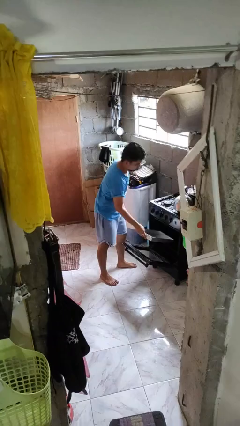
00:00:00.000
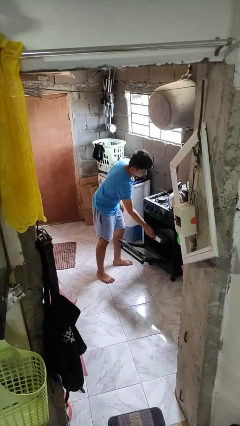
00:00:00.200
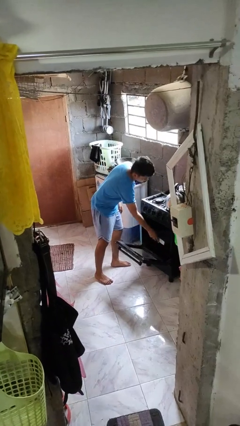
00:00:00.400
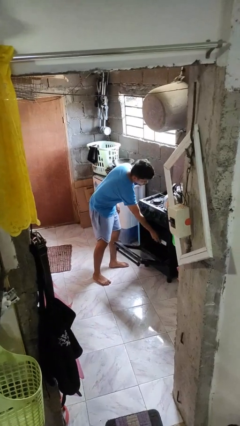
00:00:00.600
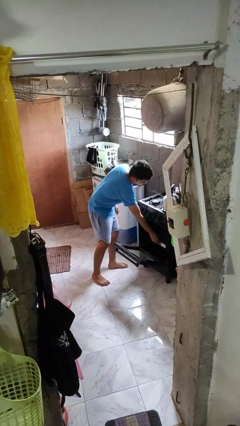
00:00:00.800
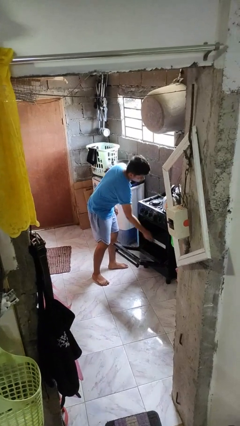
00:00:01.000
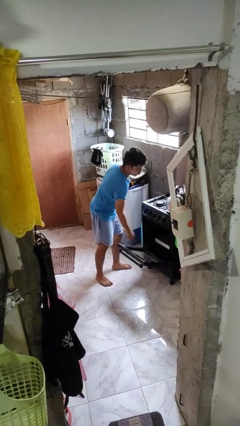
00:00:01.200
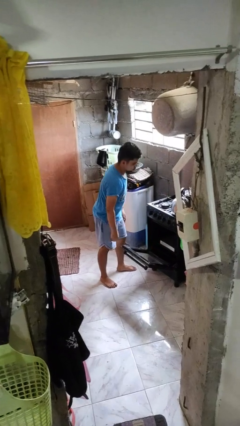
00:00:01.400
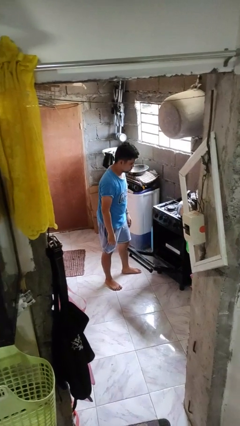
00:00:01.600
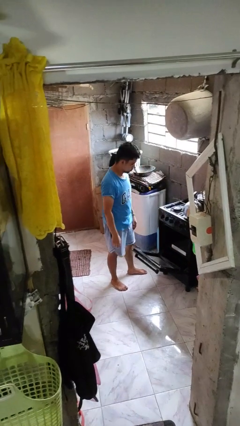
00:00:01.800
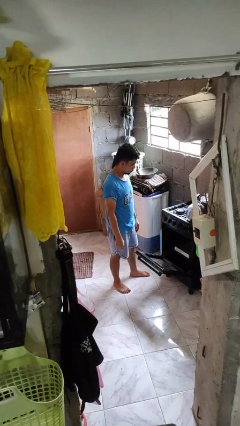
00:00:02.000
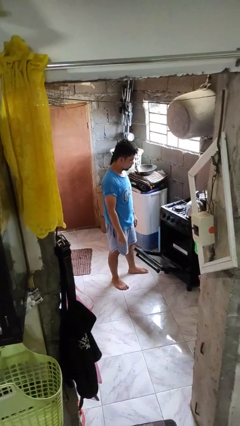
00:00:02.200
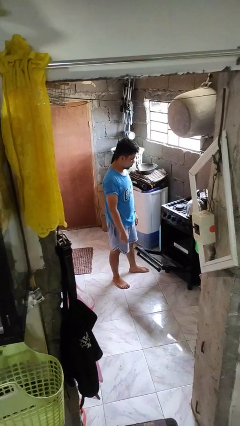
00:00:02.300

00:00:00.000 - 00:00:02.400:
person puts object into oven

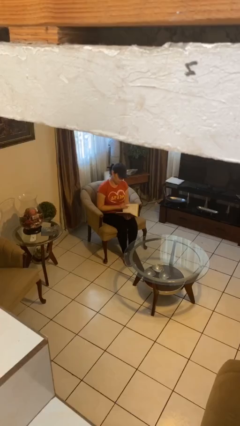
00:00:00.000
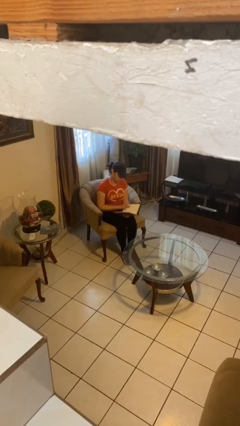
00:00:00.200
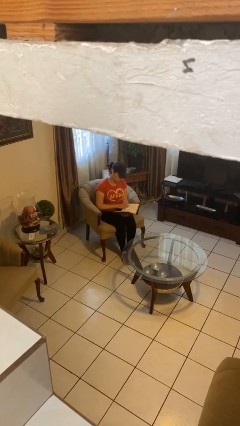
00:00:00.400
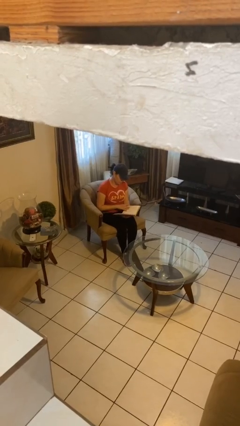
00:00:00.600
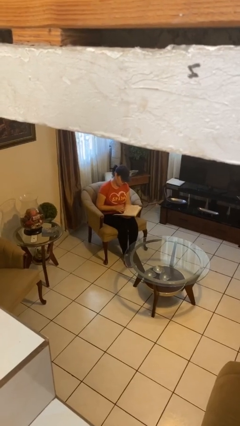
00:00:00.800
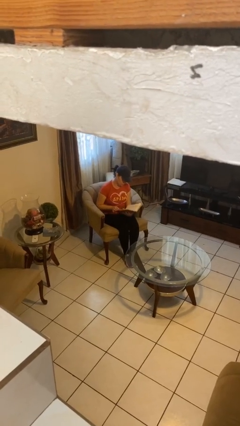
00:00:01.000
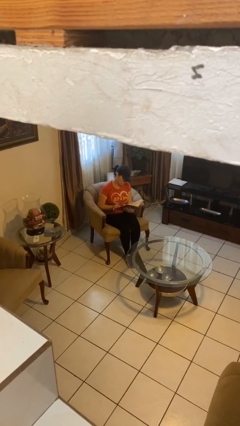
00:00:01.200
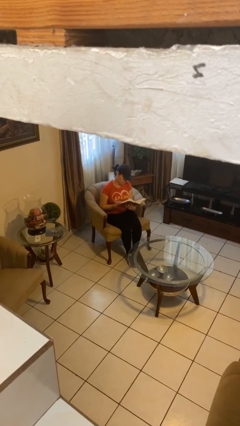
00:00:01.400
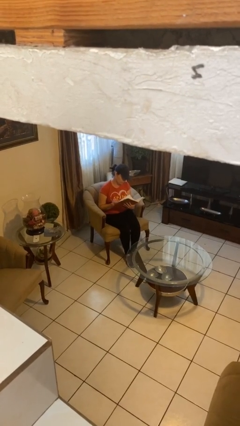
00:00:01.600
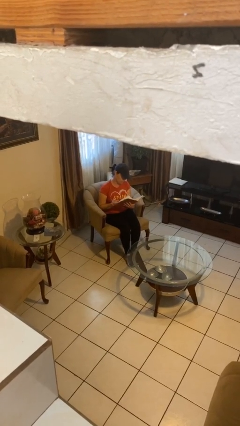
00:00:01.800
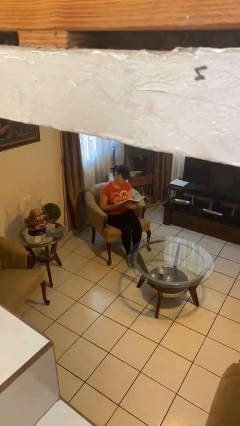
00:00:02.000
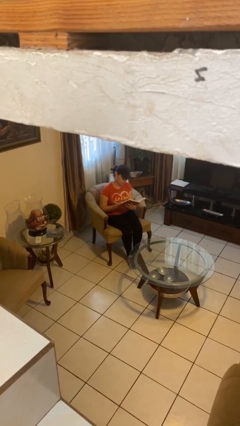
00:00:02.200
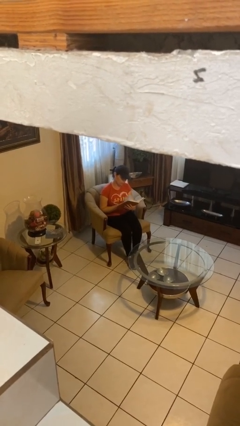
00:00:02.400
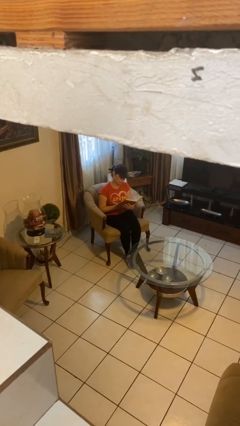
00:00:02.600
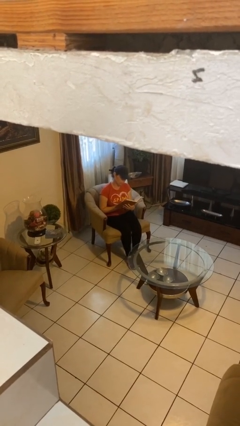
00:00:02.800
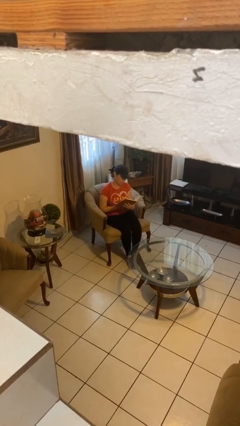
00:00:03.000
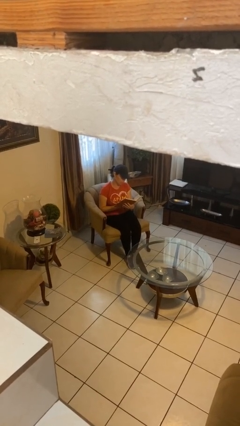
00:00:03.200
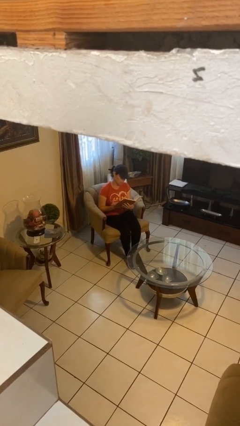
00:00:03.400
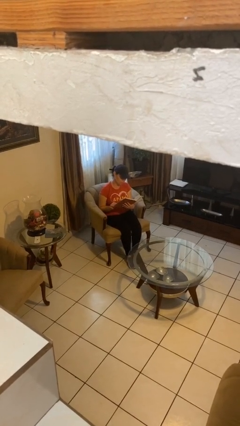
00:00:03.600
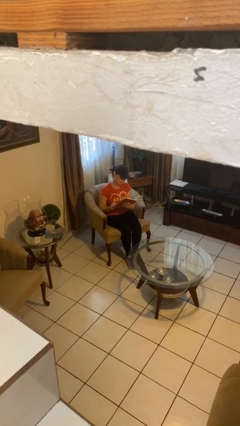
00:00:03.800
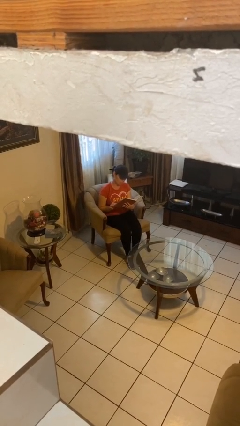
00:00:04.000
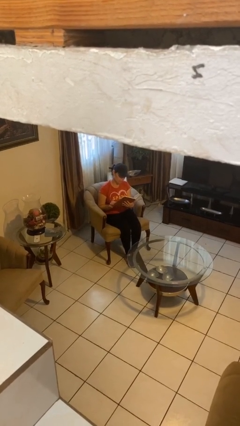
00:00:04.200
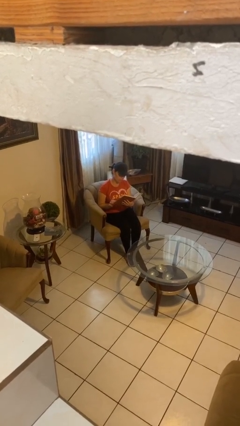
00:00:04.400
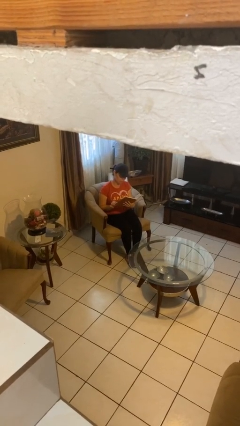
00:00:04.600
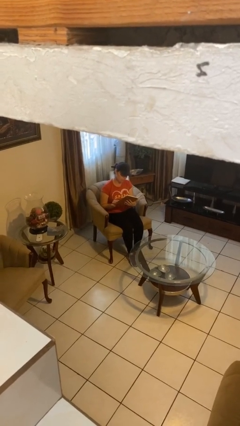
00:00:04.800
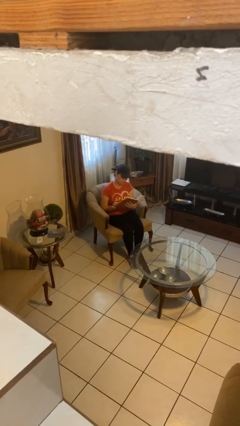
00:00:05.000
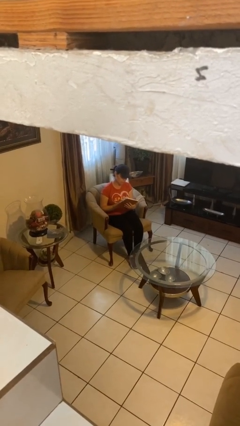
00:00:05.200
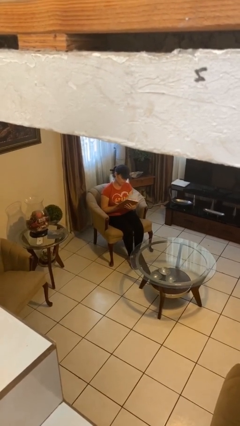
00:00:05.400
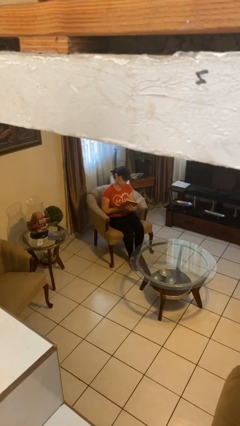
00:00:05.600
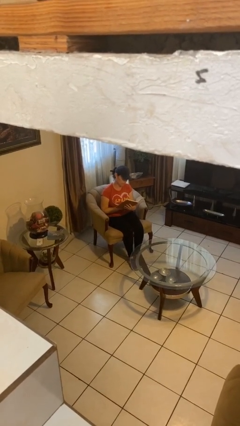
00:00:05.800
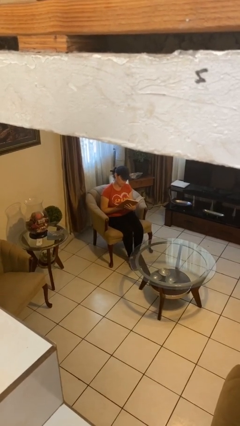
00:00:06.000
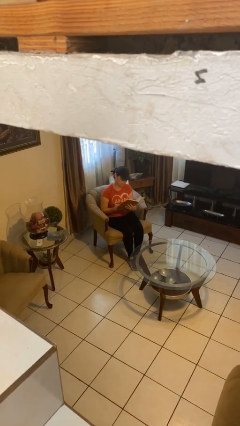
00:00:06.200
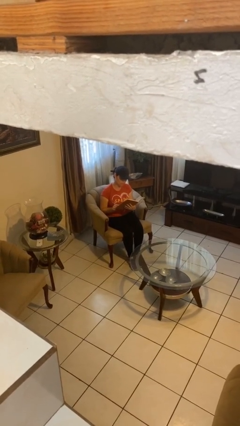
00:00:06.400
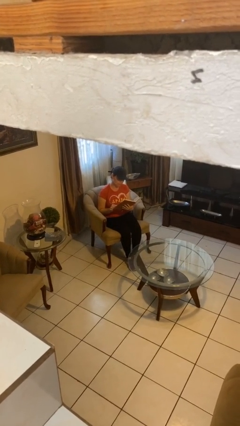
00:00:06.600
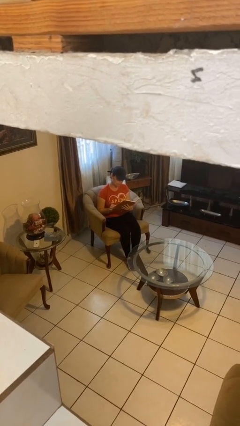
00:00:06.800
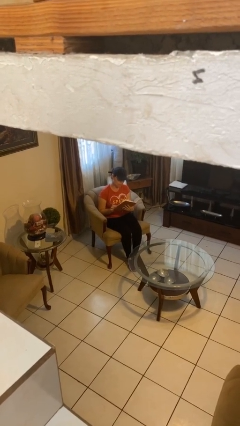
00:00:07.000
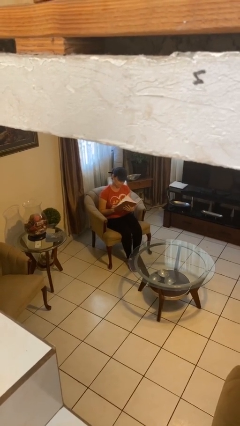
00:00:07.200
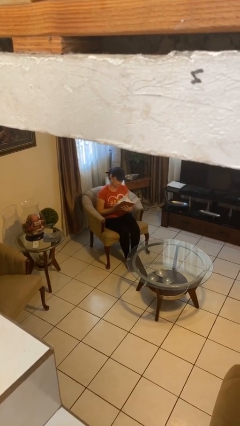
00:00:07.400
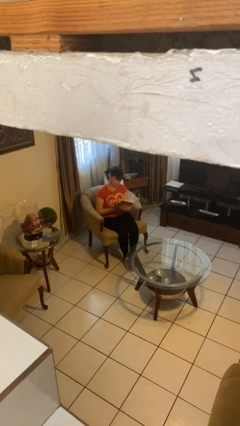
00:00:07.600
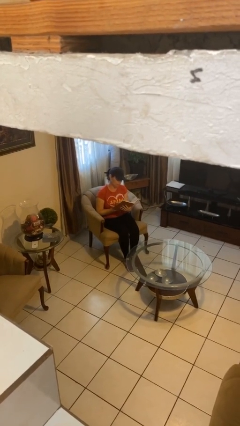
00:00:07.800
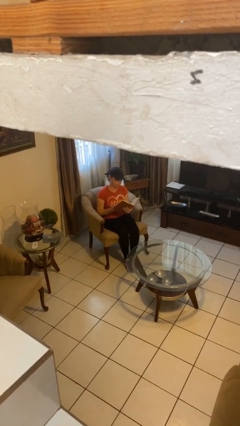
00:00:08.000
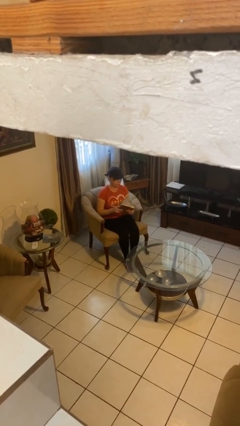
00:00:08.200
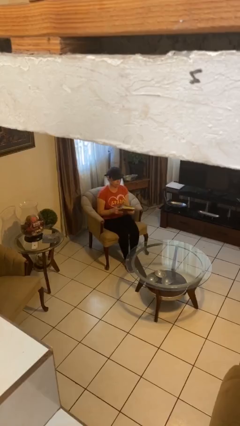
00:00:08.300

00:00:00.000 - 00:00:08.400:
person reads document

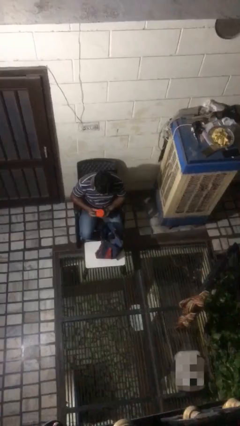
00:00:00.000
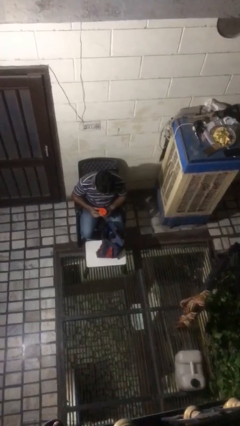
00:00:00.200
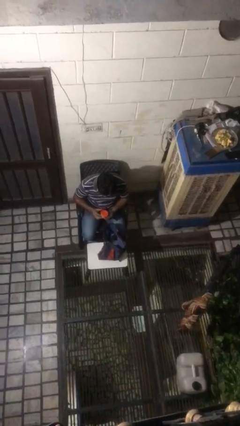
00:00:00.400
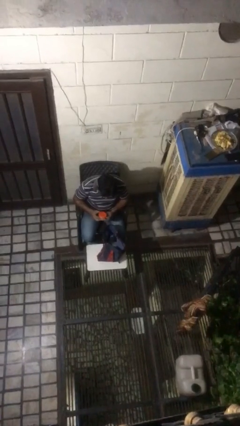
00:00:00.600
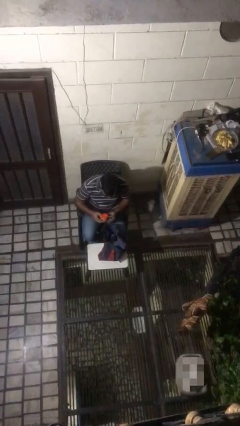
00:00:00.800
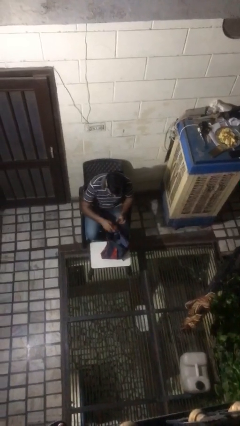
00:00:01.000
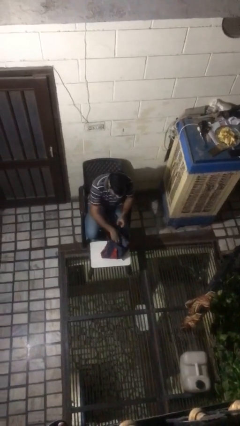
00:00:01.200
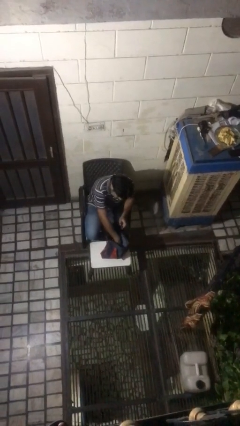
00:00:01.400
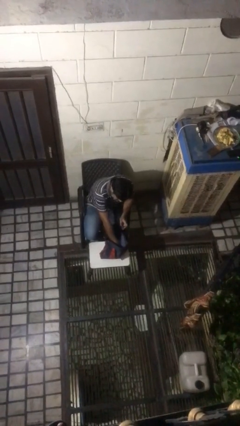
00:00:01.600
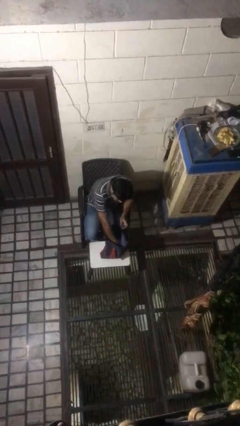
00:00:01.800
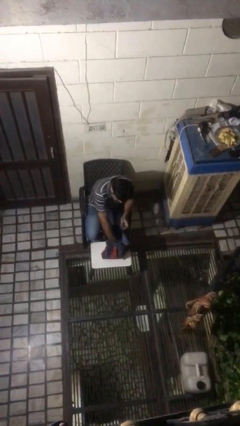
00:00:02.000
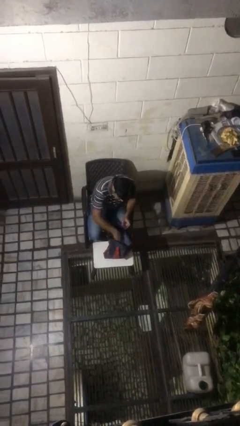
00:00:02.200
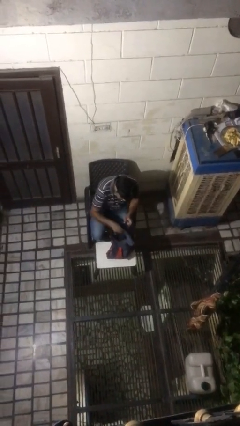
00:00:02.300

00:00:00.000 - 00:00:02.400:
person puts object into bag

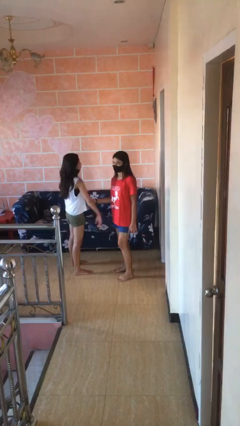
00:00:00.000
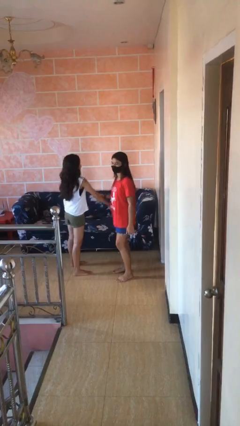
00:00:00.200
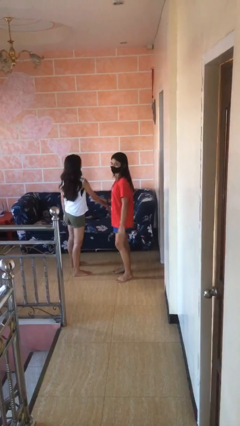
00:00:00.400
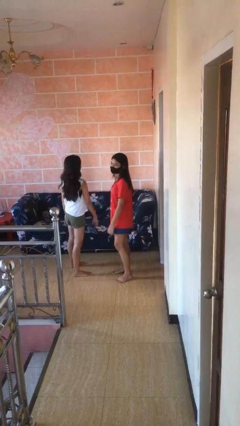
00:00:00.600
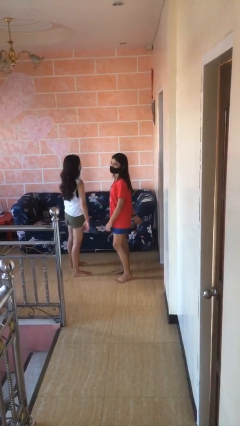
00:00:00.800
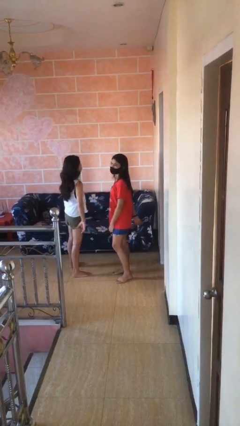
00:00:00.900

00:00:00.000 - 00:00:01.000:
person grabs person by forearm

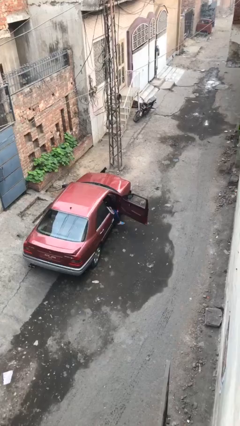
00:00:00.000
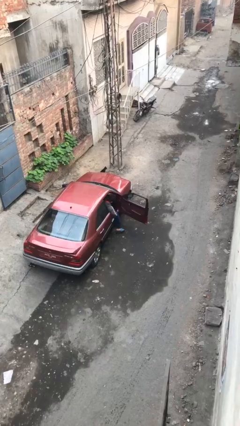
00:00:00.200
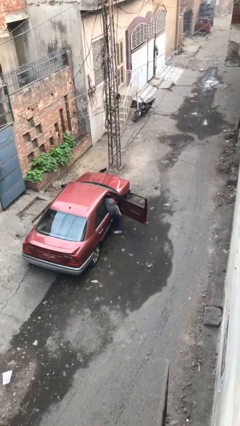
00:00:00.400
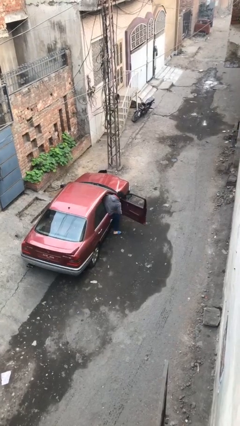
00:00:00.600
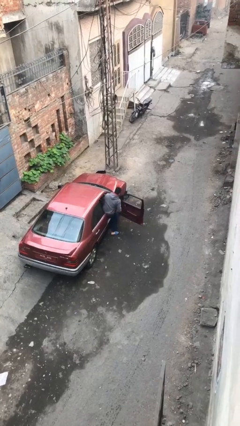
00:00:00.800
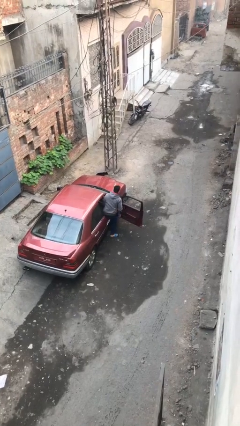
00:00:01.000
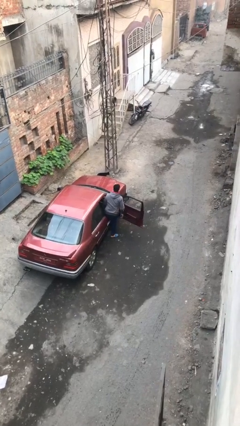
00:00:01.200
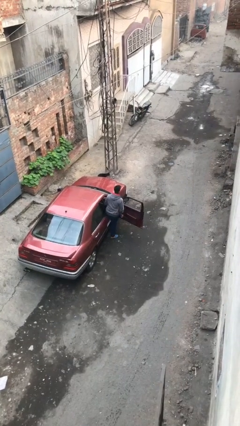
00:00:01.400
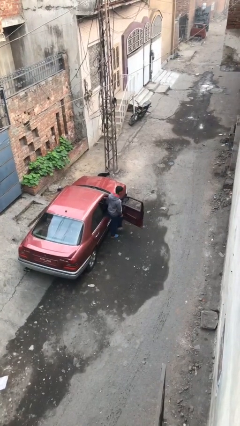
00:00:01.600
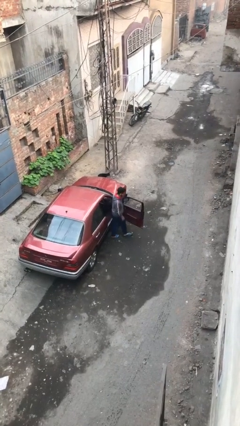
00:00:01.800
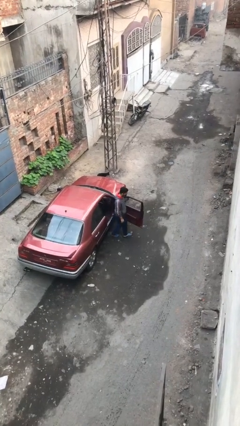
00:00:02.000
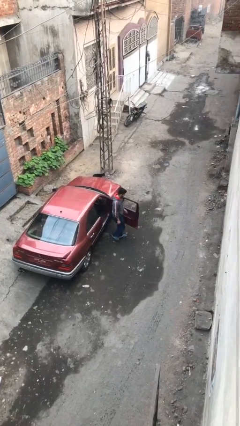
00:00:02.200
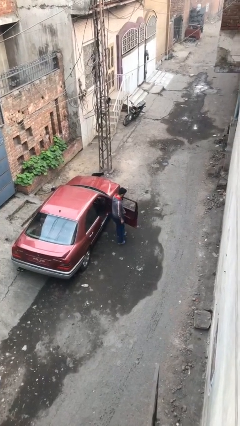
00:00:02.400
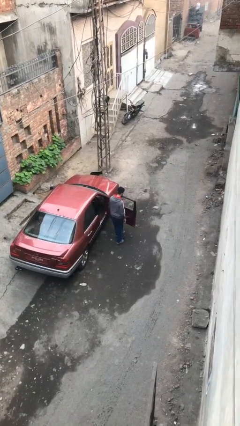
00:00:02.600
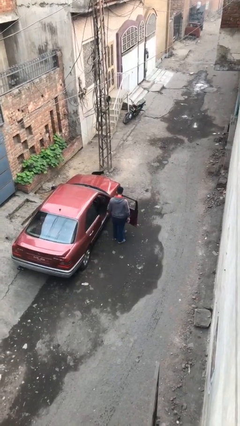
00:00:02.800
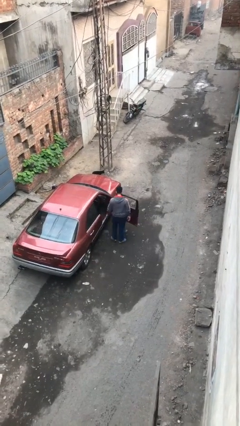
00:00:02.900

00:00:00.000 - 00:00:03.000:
person exits car

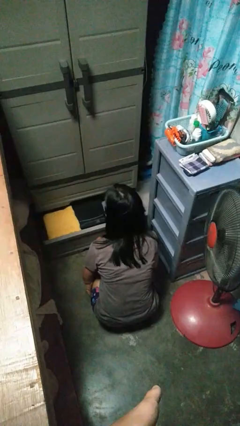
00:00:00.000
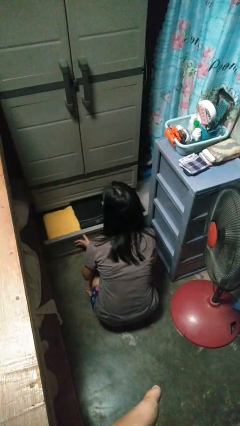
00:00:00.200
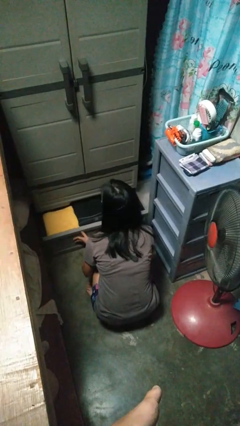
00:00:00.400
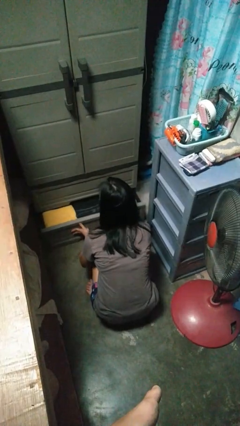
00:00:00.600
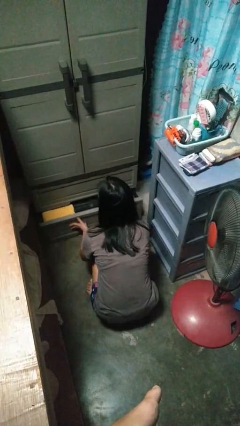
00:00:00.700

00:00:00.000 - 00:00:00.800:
person closes dresser drawer
